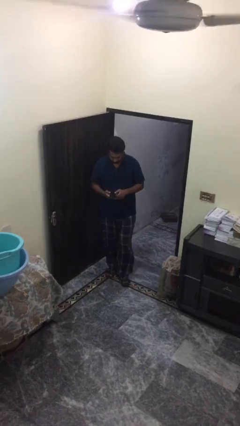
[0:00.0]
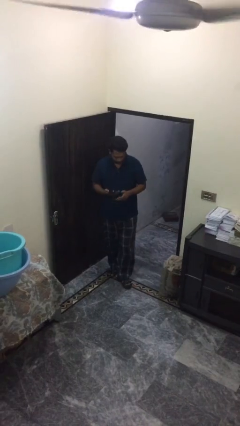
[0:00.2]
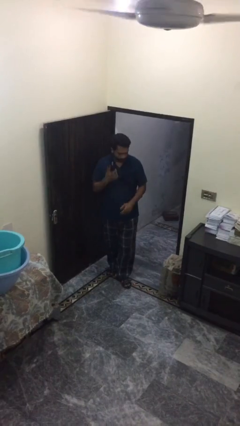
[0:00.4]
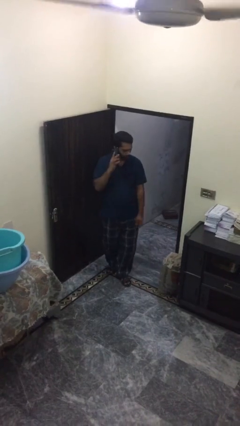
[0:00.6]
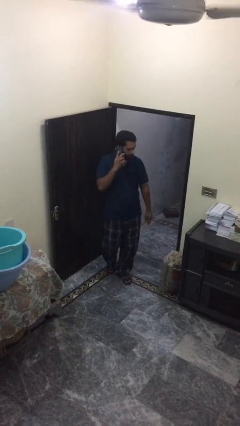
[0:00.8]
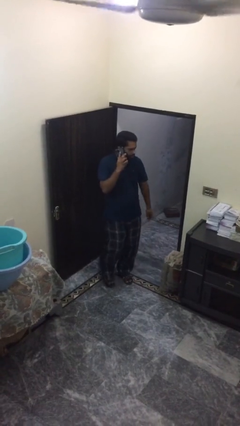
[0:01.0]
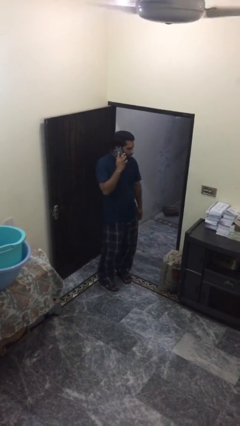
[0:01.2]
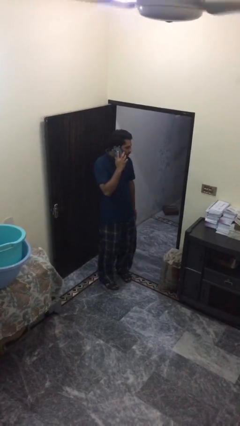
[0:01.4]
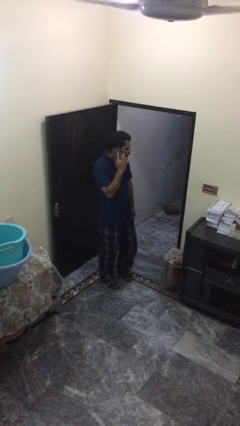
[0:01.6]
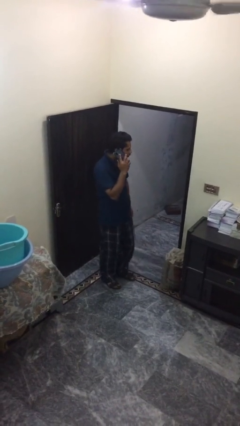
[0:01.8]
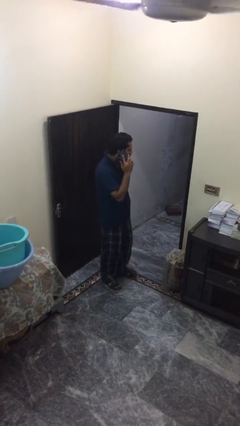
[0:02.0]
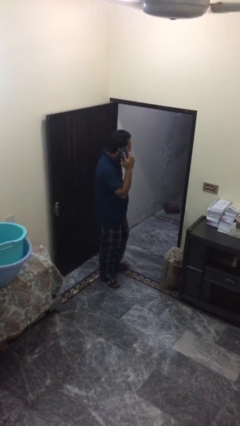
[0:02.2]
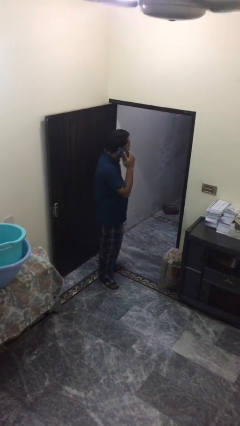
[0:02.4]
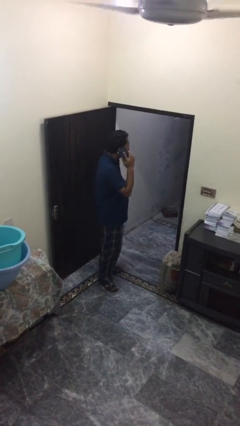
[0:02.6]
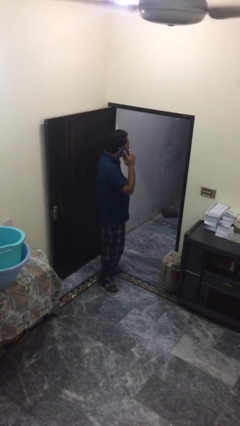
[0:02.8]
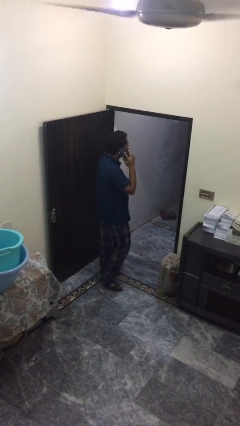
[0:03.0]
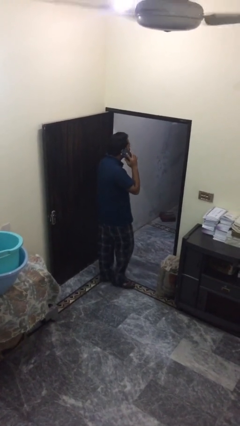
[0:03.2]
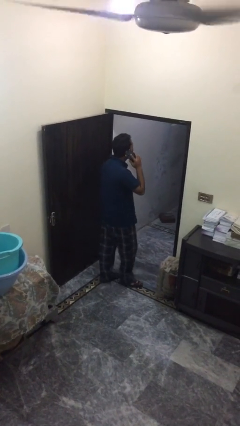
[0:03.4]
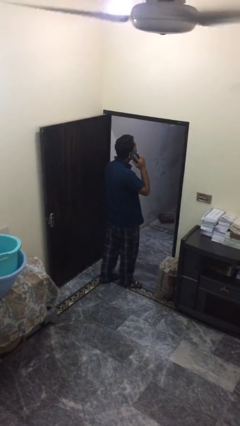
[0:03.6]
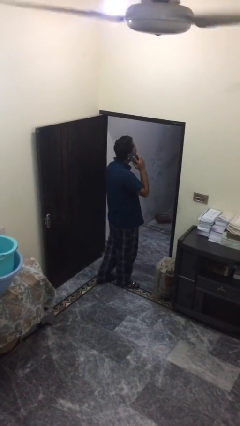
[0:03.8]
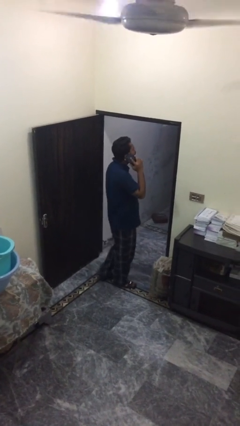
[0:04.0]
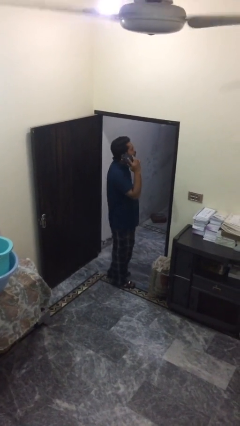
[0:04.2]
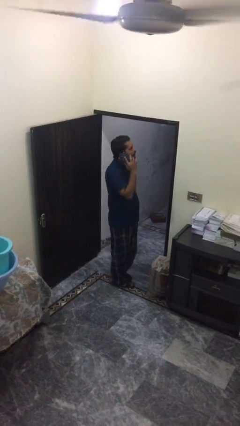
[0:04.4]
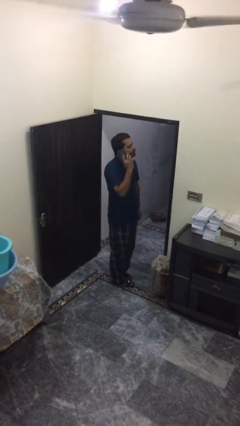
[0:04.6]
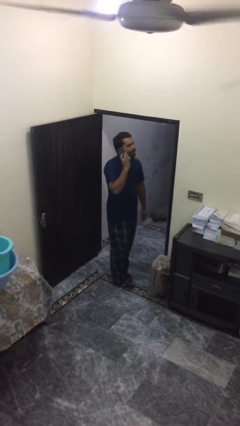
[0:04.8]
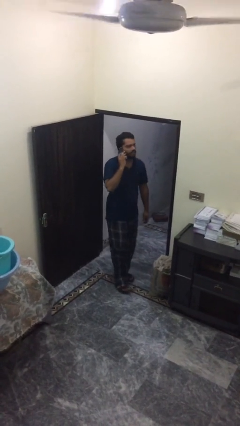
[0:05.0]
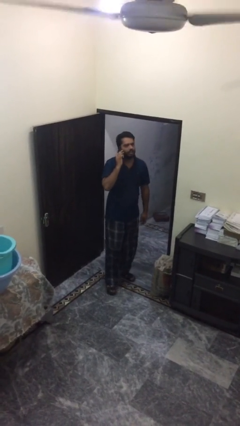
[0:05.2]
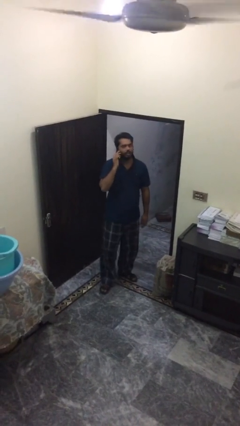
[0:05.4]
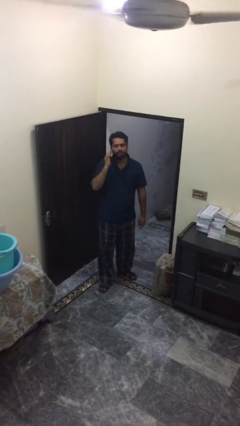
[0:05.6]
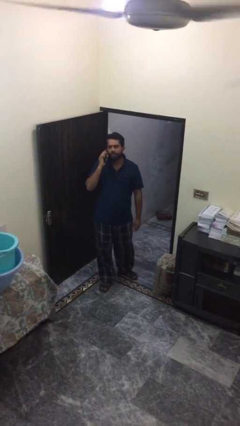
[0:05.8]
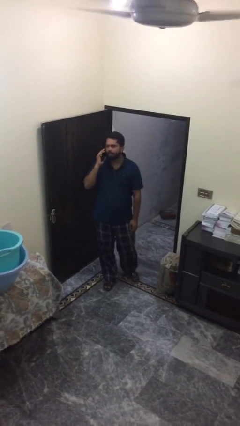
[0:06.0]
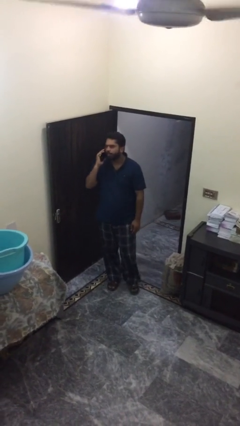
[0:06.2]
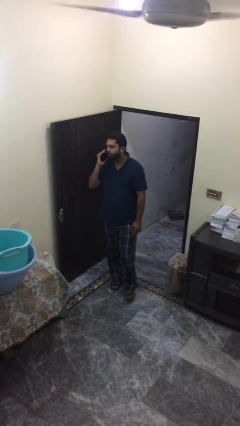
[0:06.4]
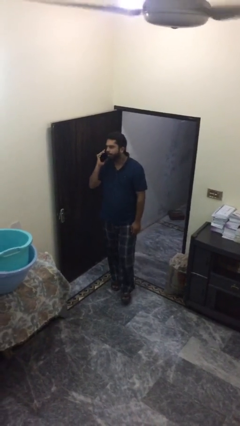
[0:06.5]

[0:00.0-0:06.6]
person talks on phone

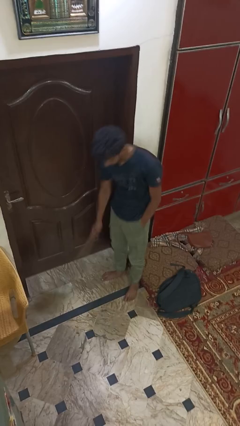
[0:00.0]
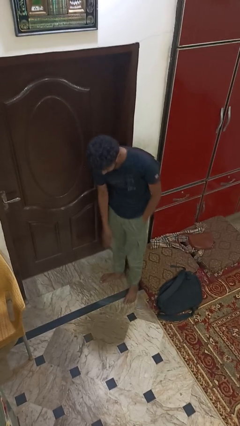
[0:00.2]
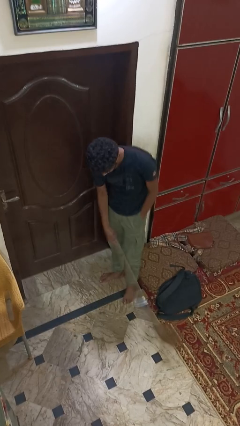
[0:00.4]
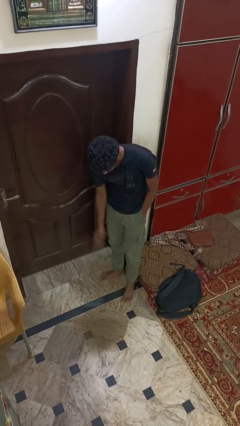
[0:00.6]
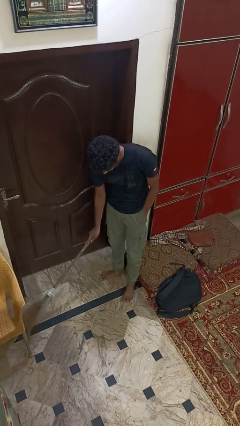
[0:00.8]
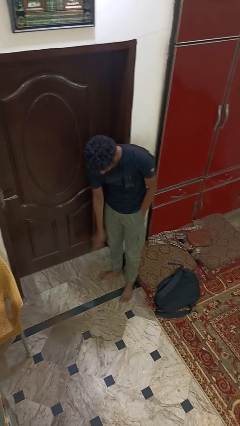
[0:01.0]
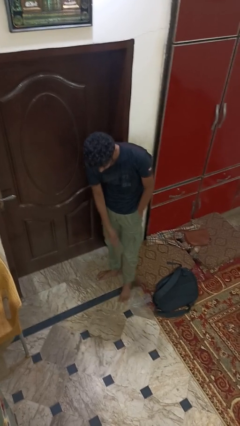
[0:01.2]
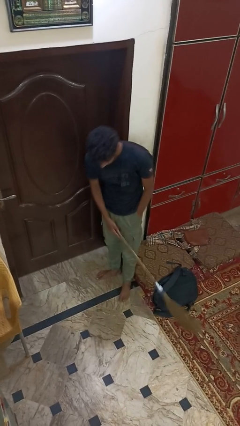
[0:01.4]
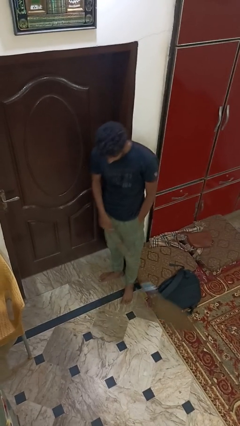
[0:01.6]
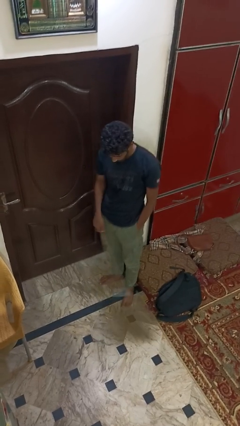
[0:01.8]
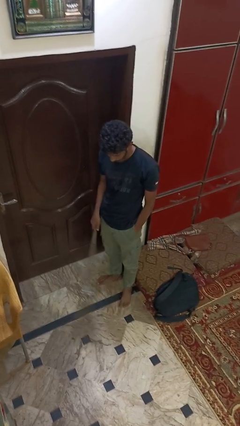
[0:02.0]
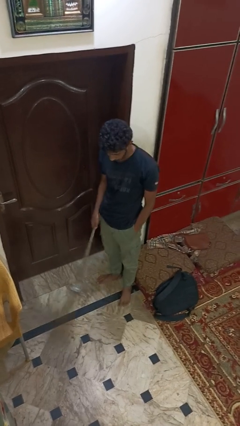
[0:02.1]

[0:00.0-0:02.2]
person sweeps floor

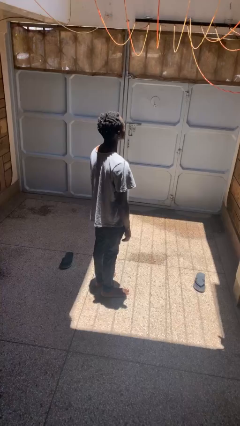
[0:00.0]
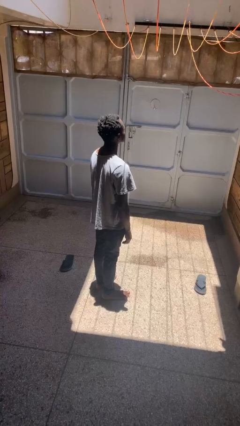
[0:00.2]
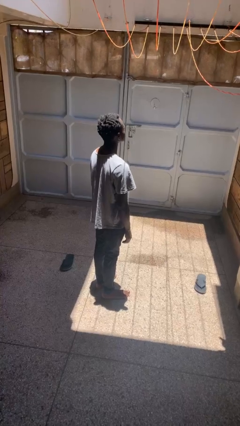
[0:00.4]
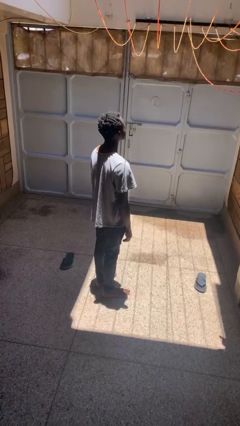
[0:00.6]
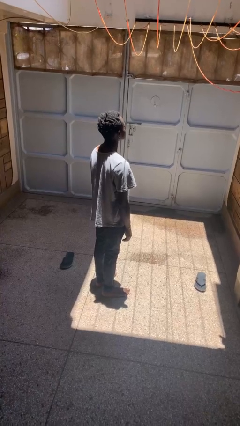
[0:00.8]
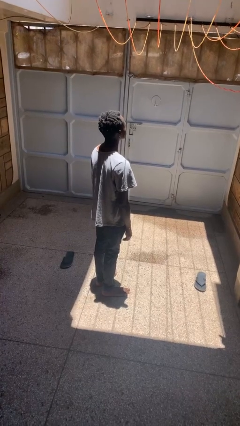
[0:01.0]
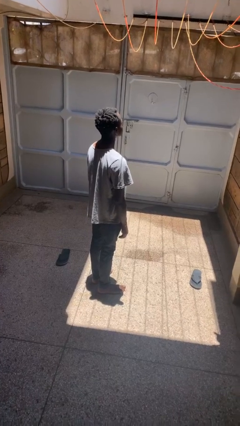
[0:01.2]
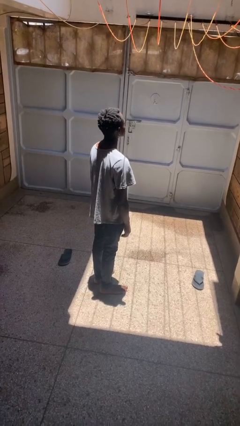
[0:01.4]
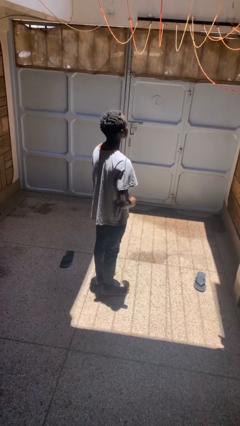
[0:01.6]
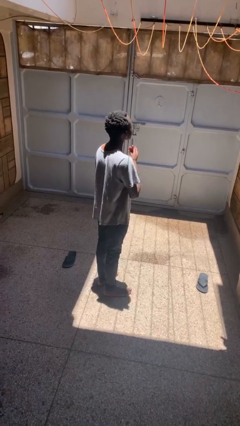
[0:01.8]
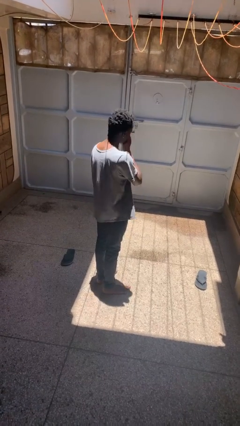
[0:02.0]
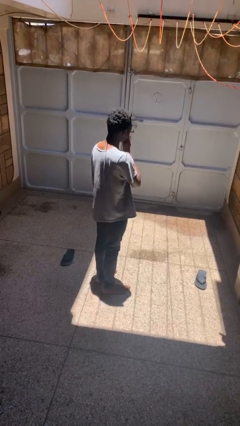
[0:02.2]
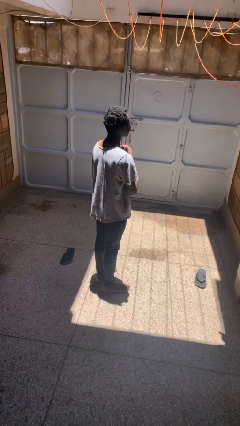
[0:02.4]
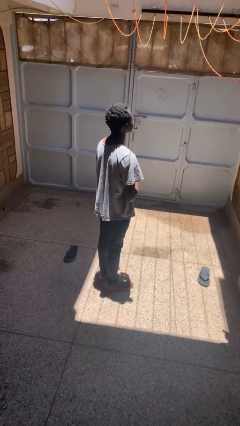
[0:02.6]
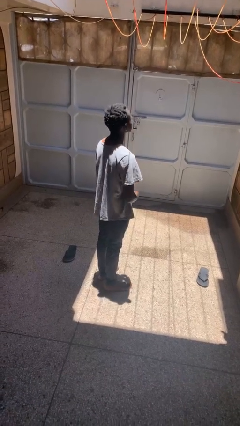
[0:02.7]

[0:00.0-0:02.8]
person sneezes into hand

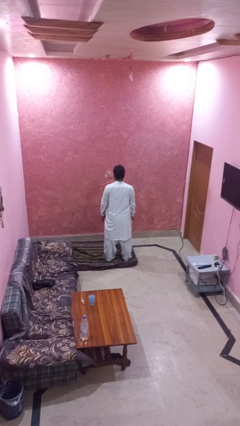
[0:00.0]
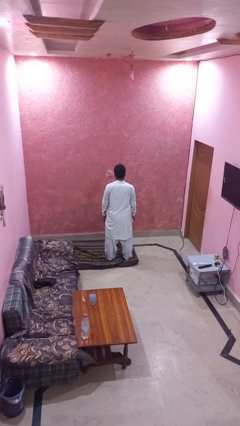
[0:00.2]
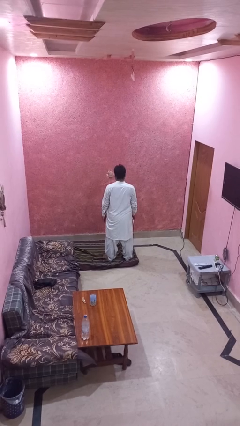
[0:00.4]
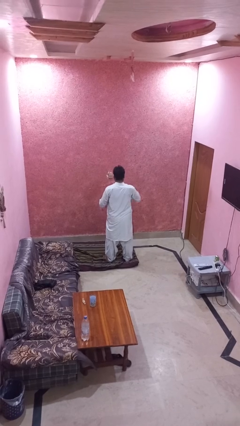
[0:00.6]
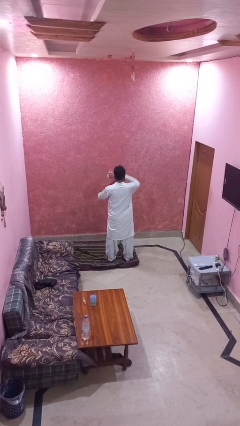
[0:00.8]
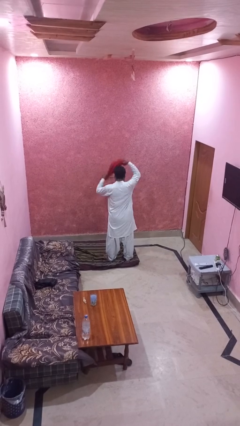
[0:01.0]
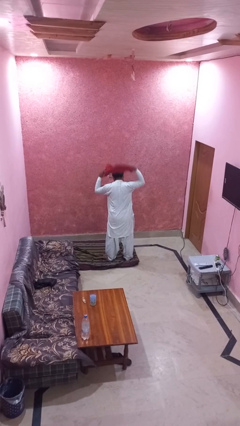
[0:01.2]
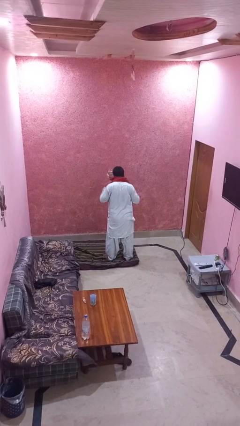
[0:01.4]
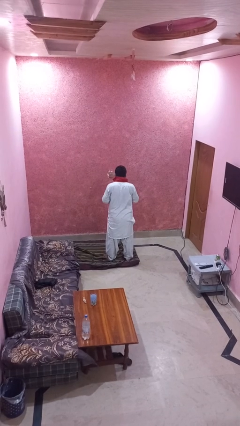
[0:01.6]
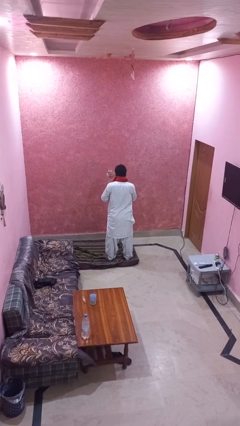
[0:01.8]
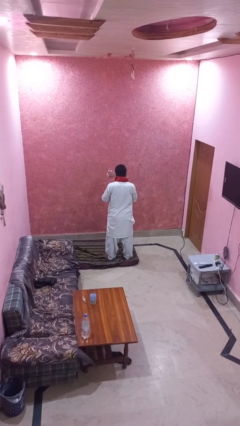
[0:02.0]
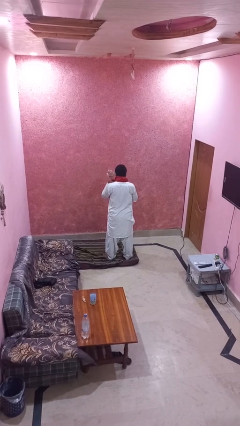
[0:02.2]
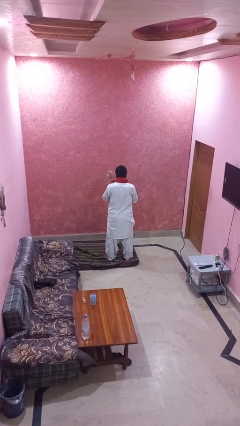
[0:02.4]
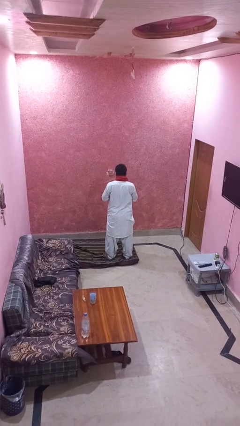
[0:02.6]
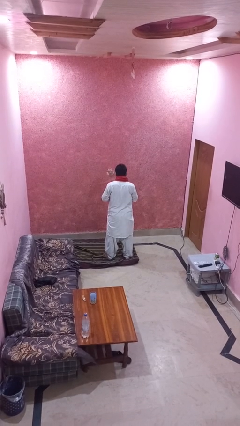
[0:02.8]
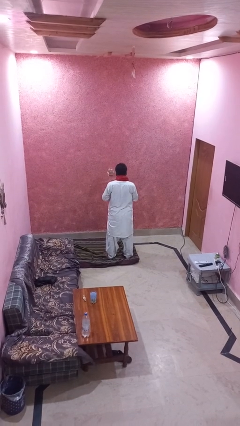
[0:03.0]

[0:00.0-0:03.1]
person puts on scarf

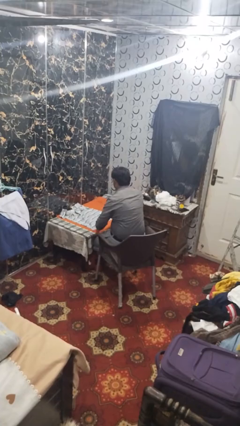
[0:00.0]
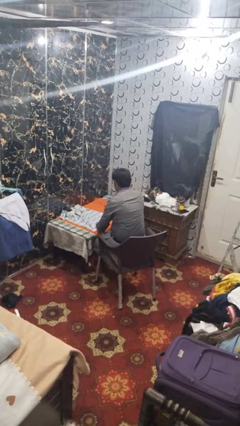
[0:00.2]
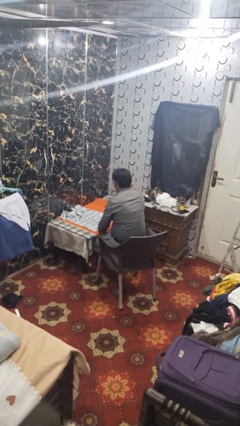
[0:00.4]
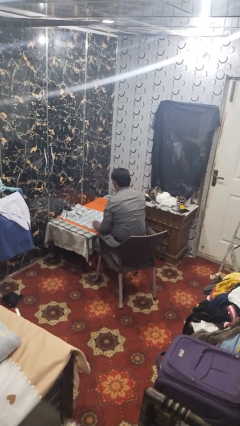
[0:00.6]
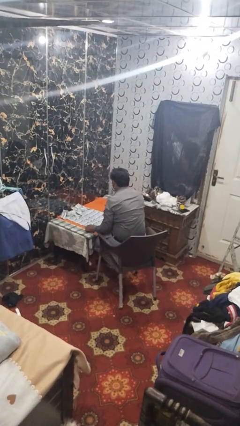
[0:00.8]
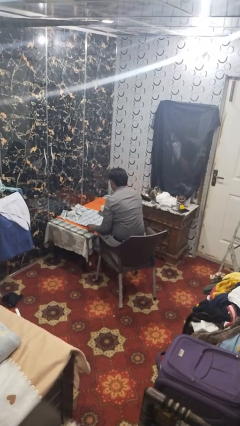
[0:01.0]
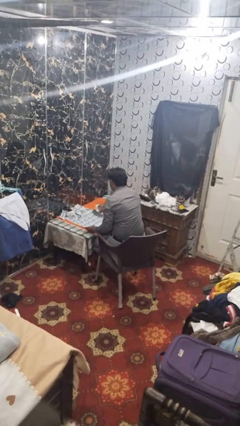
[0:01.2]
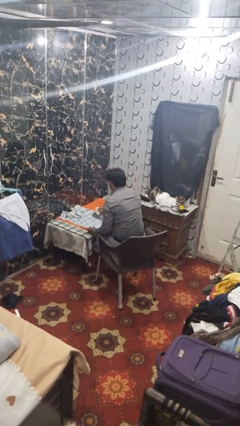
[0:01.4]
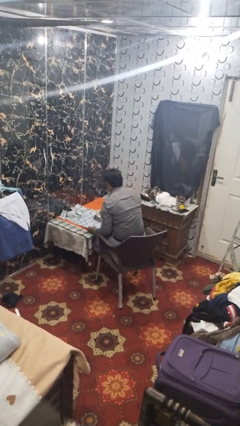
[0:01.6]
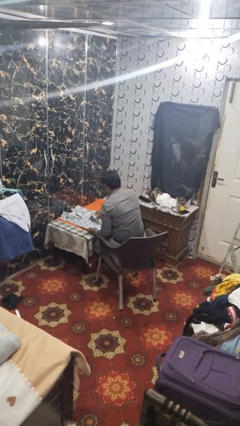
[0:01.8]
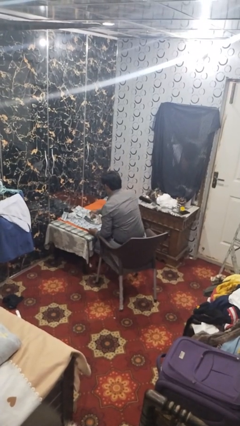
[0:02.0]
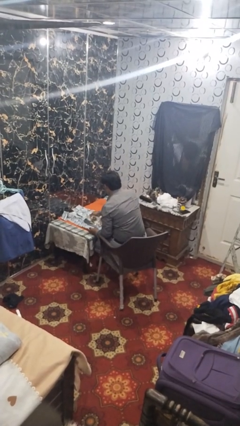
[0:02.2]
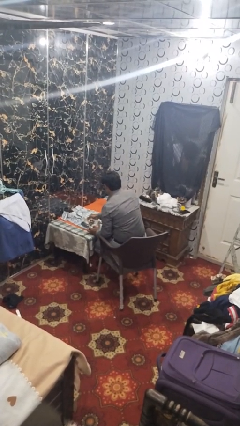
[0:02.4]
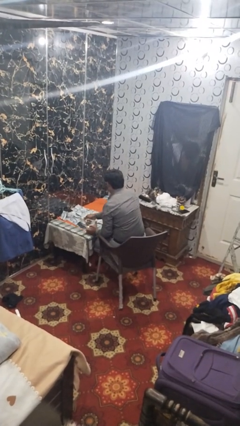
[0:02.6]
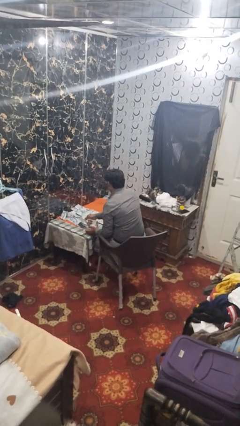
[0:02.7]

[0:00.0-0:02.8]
person irons clothes

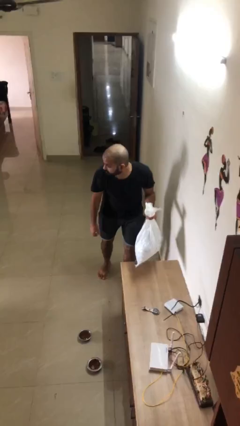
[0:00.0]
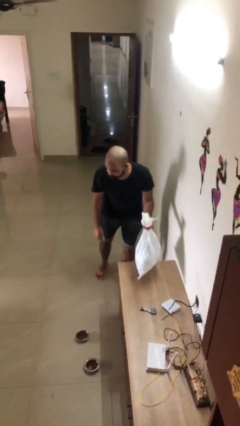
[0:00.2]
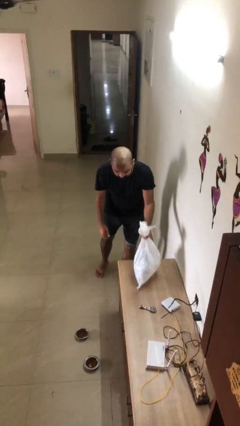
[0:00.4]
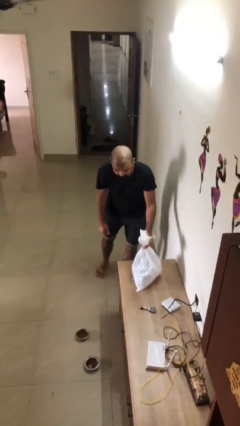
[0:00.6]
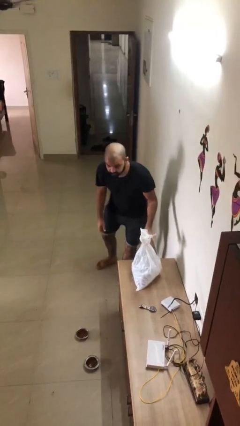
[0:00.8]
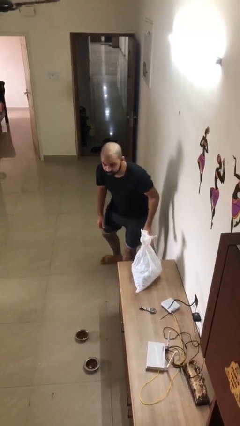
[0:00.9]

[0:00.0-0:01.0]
person puts down object on table
